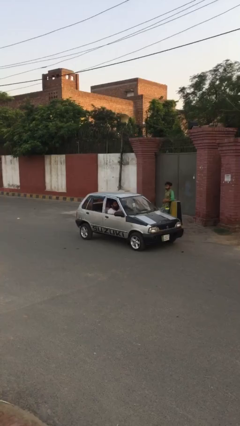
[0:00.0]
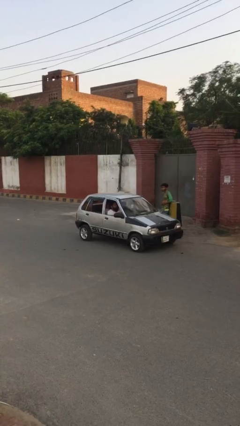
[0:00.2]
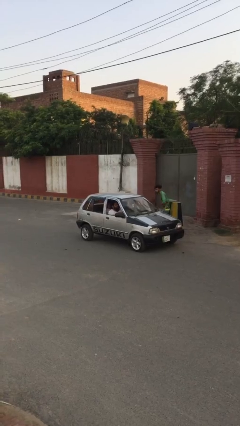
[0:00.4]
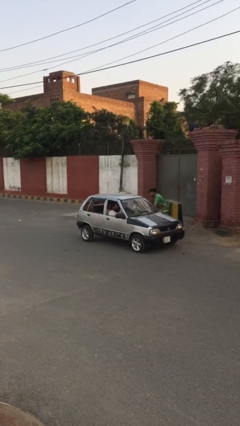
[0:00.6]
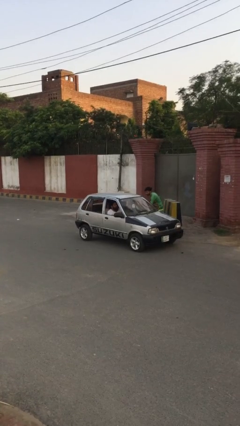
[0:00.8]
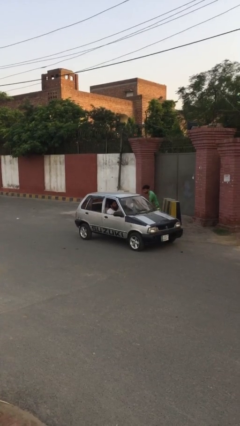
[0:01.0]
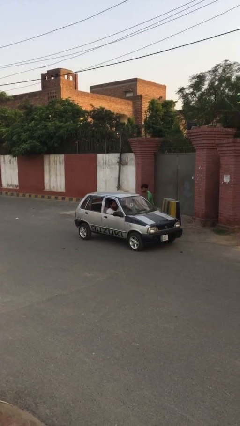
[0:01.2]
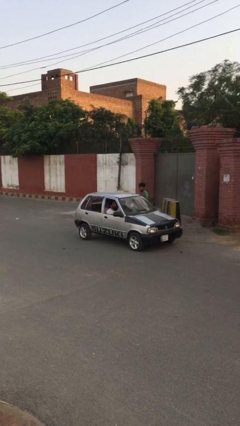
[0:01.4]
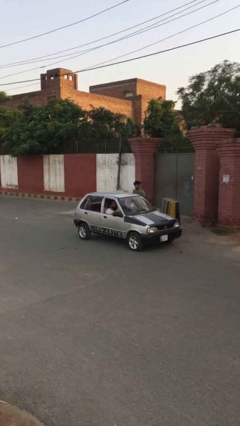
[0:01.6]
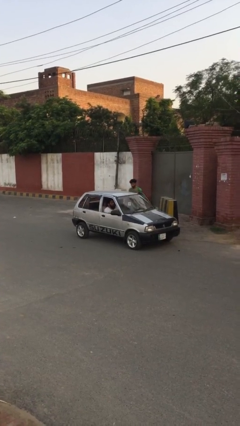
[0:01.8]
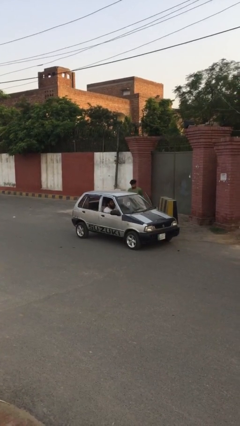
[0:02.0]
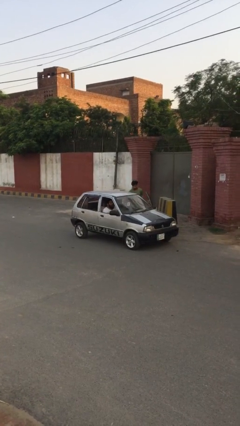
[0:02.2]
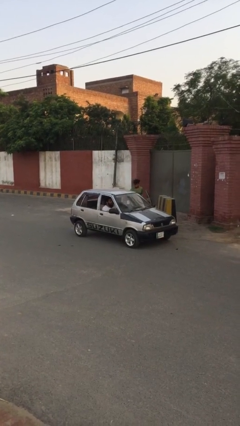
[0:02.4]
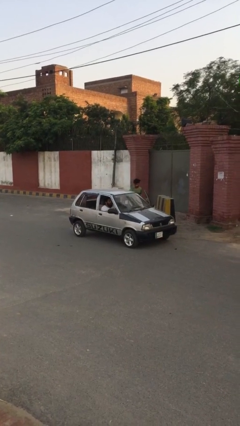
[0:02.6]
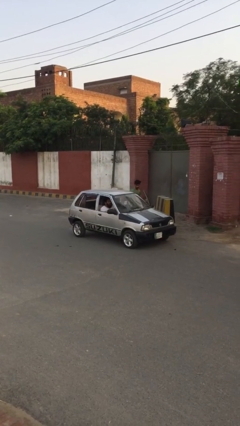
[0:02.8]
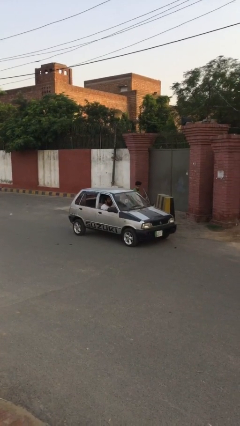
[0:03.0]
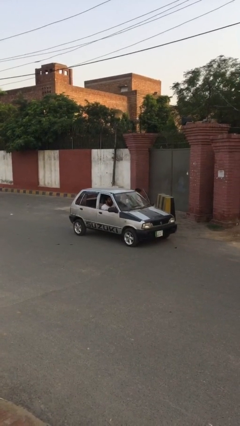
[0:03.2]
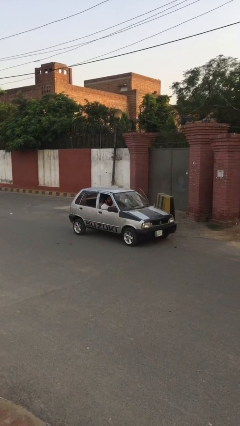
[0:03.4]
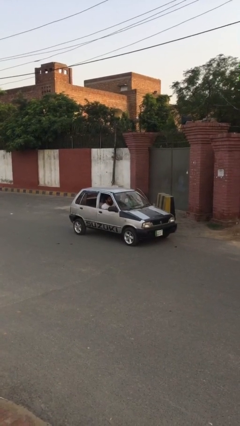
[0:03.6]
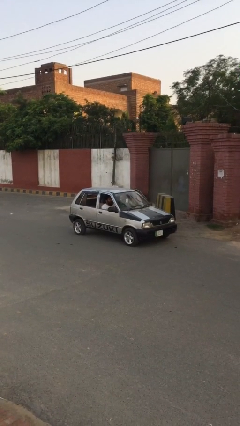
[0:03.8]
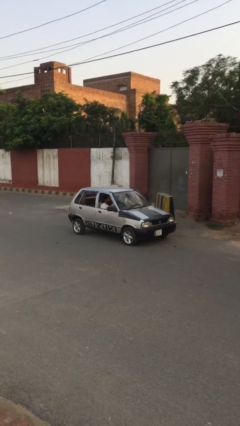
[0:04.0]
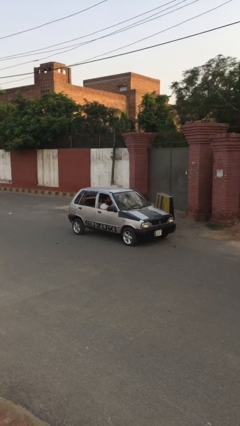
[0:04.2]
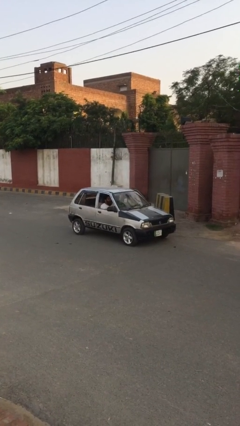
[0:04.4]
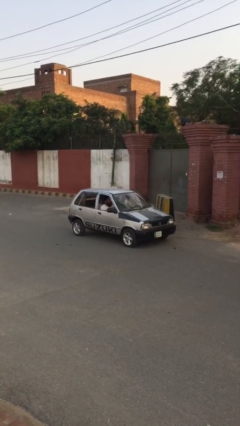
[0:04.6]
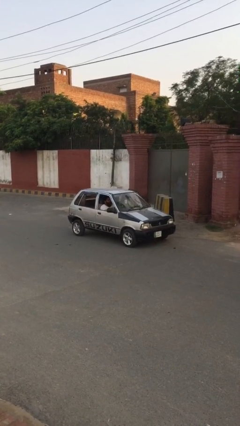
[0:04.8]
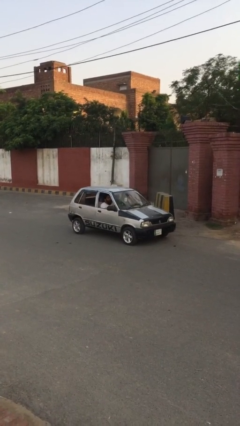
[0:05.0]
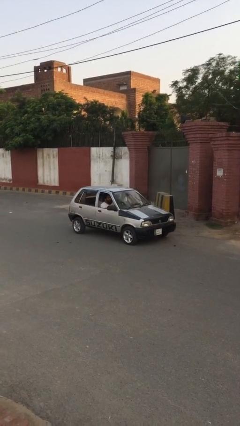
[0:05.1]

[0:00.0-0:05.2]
car picks up person

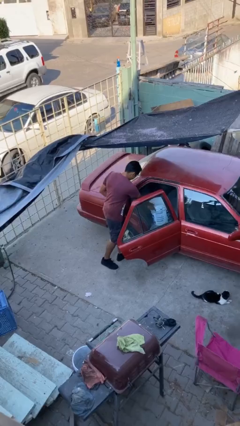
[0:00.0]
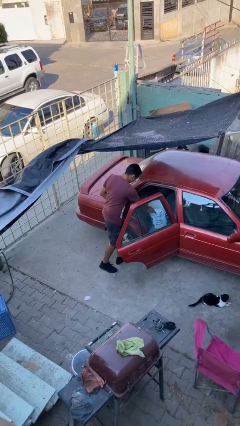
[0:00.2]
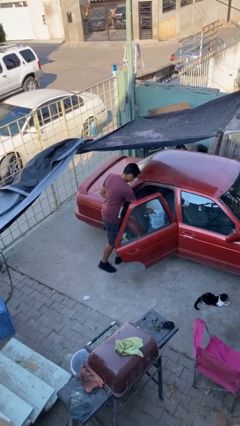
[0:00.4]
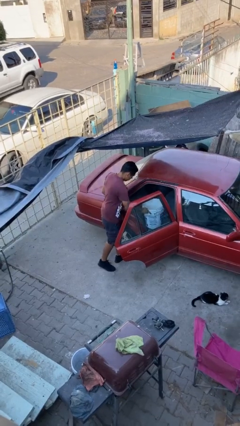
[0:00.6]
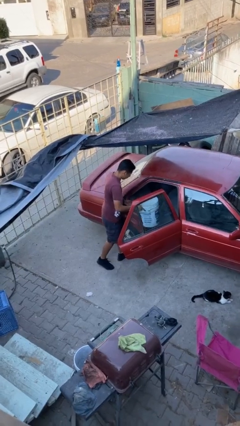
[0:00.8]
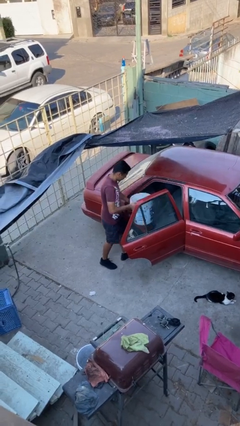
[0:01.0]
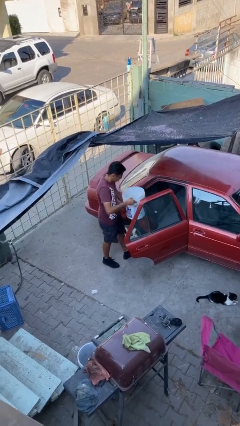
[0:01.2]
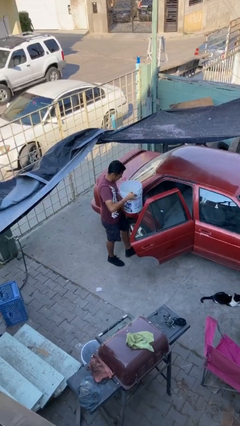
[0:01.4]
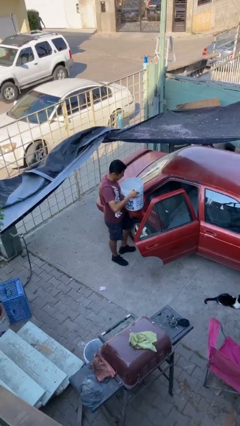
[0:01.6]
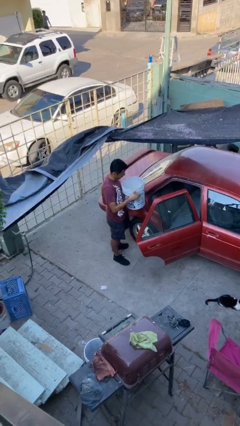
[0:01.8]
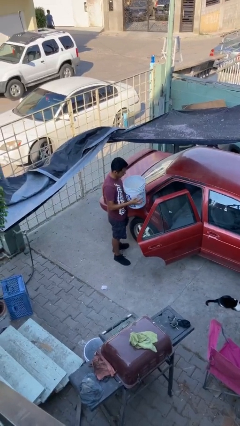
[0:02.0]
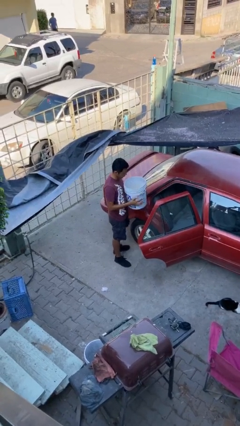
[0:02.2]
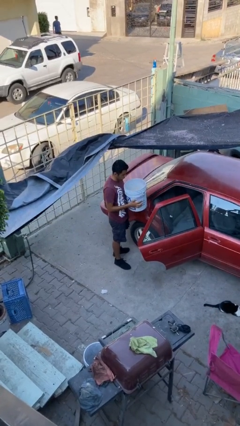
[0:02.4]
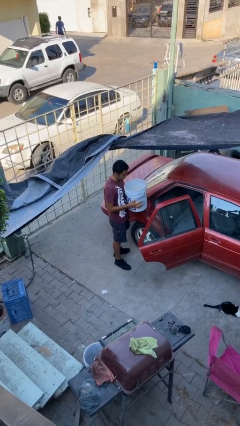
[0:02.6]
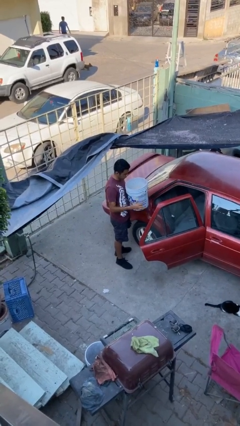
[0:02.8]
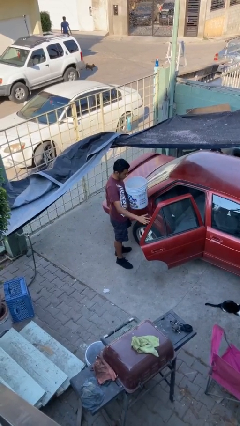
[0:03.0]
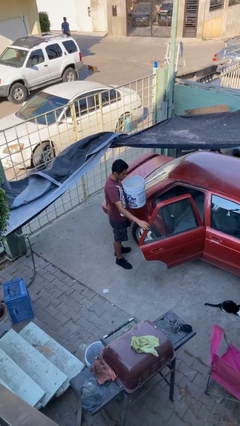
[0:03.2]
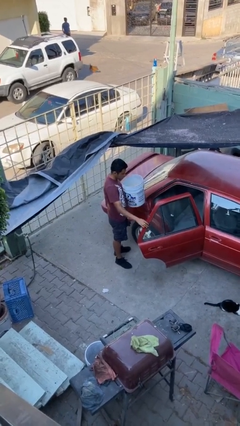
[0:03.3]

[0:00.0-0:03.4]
person unloads car

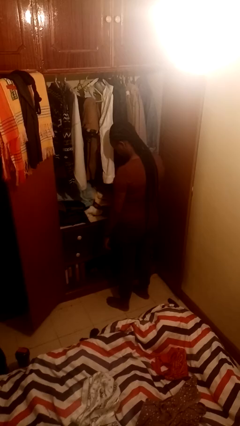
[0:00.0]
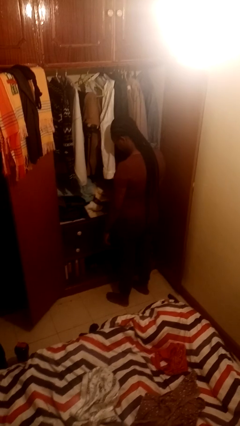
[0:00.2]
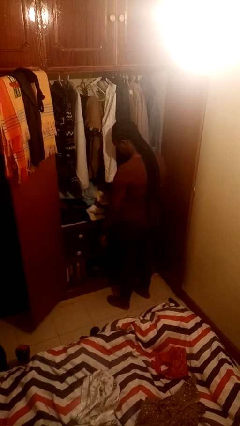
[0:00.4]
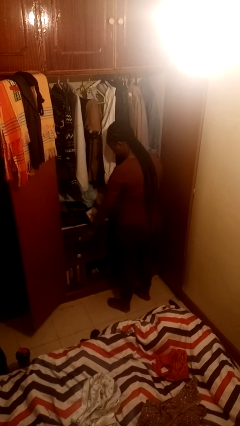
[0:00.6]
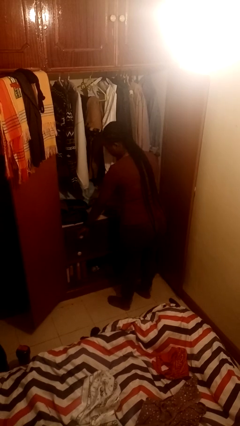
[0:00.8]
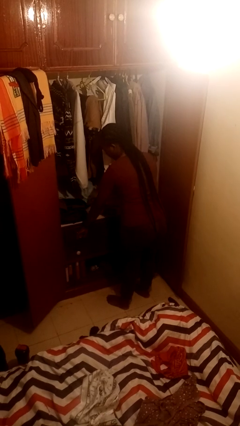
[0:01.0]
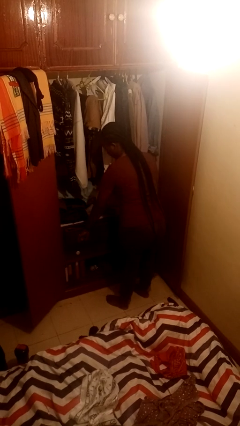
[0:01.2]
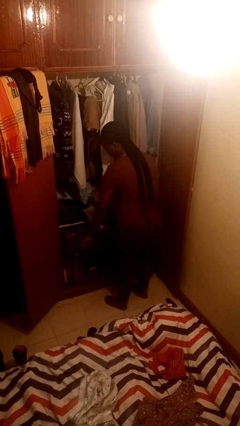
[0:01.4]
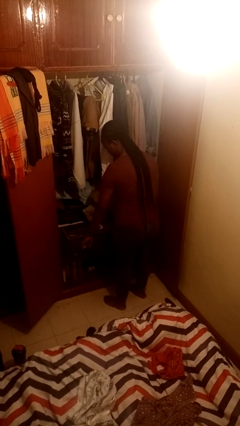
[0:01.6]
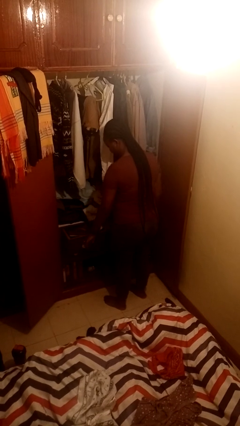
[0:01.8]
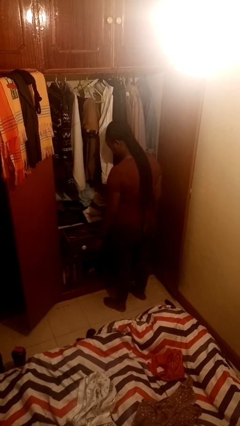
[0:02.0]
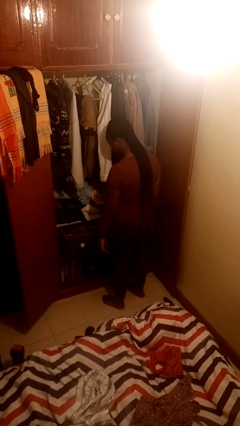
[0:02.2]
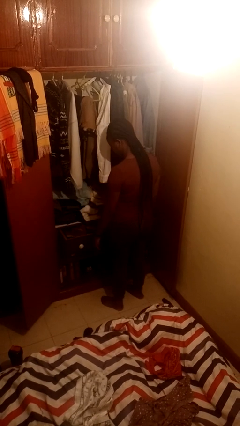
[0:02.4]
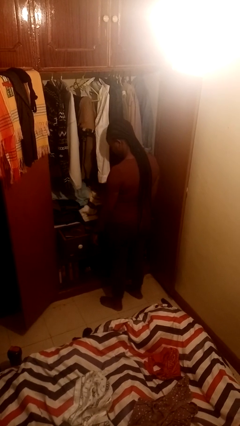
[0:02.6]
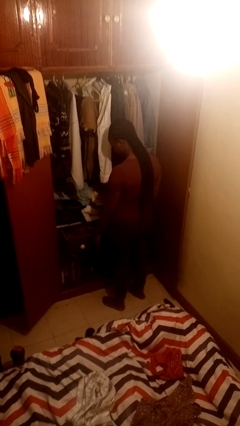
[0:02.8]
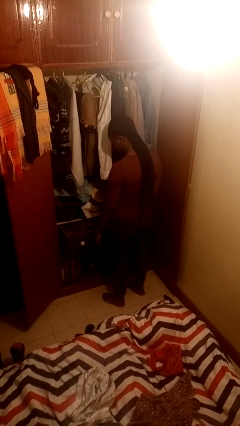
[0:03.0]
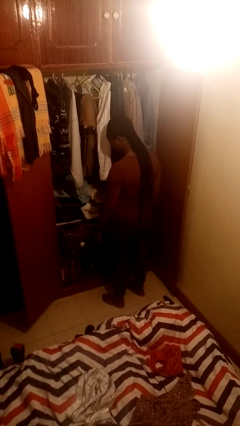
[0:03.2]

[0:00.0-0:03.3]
person opens dresser drawer

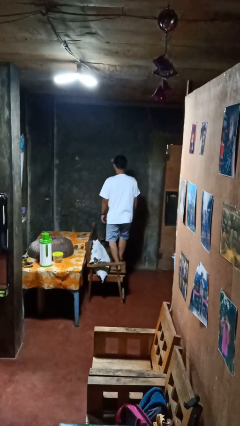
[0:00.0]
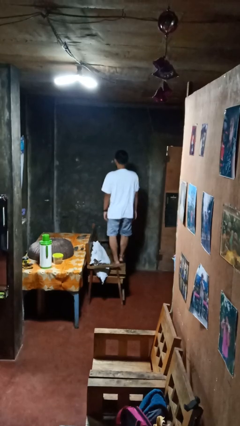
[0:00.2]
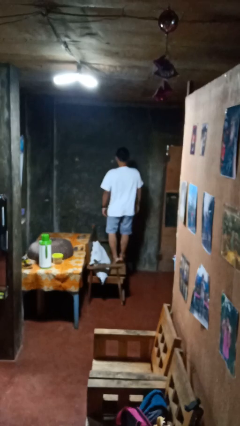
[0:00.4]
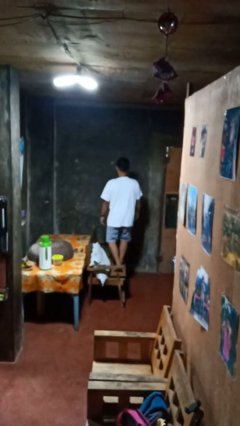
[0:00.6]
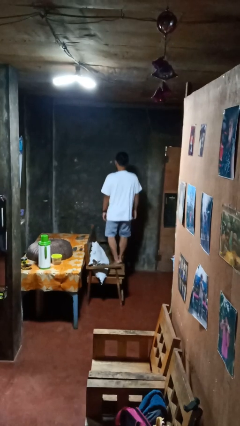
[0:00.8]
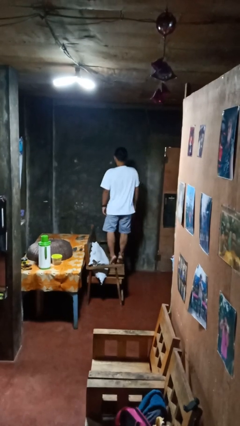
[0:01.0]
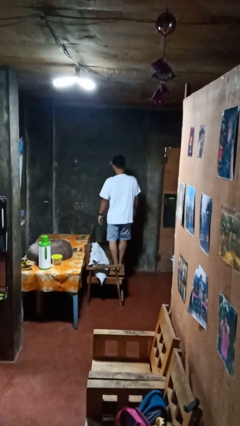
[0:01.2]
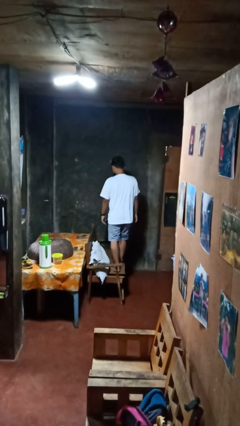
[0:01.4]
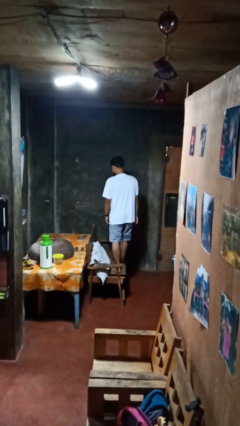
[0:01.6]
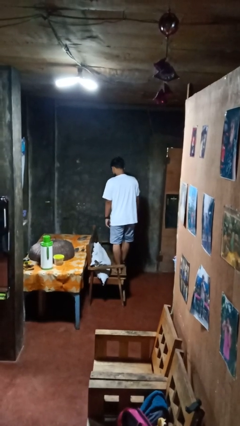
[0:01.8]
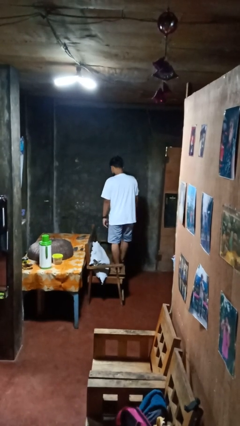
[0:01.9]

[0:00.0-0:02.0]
person jumps on couch

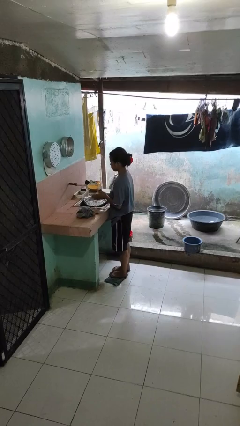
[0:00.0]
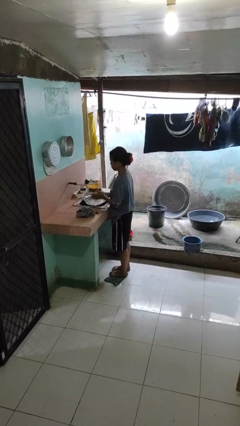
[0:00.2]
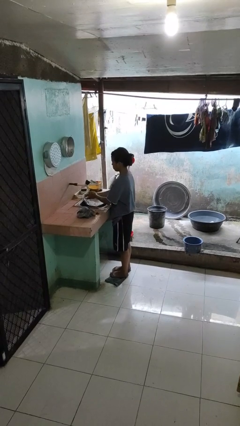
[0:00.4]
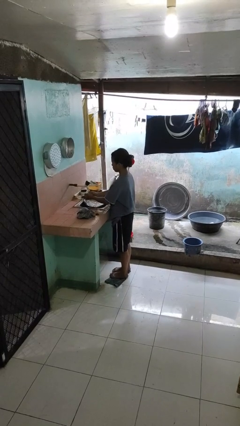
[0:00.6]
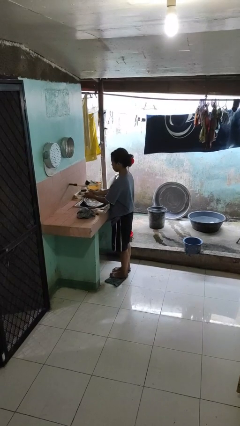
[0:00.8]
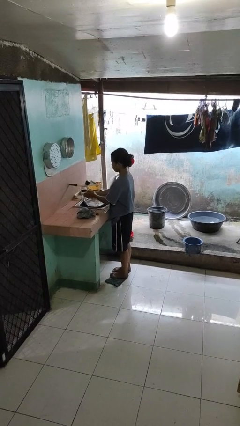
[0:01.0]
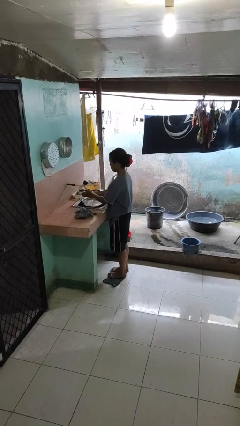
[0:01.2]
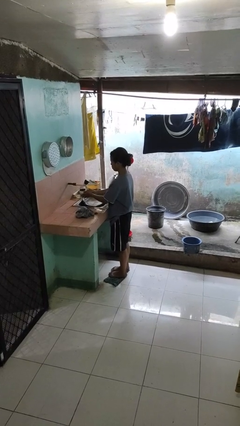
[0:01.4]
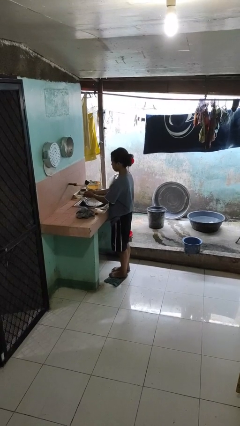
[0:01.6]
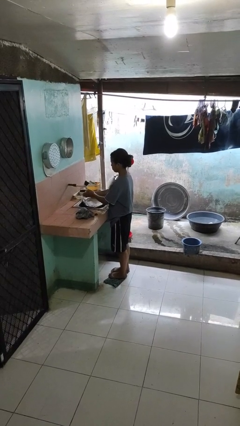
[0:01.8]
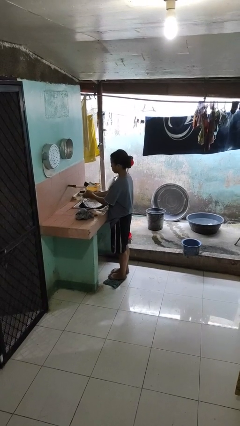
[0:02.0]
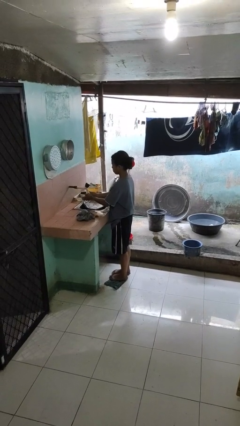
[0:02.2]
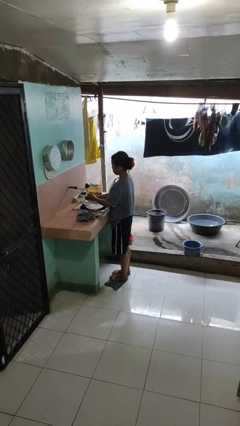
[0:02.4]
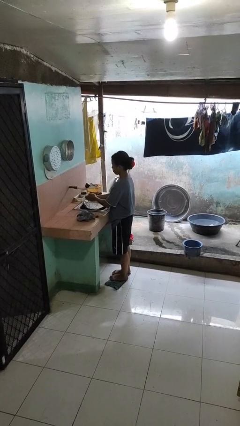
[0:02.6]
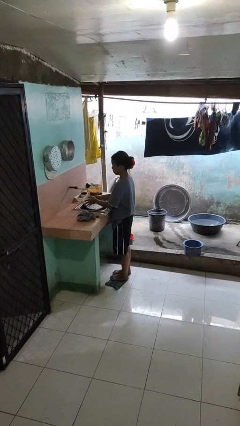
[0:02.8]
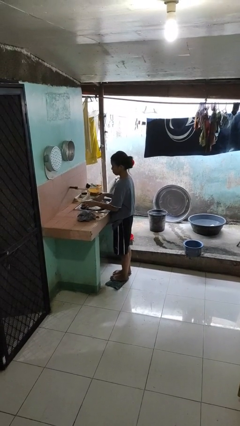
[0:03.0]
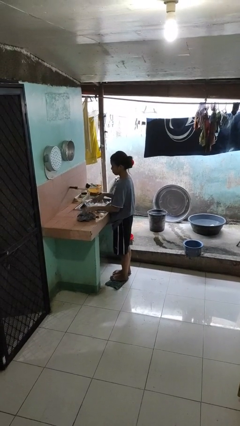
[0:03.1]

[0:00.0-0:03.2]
person washes hands

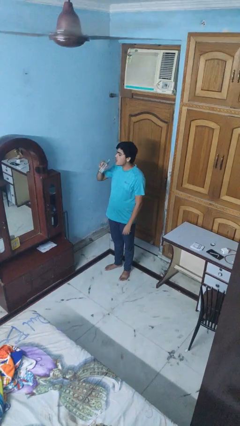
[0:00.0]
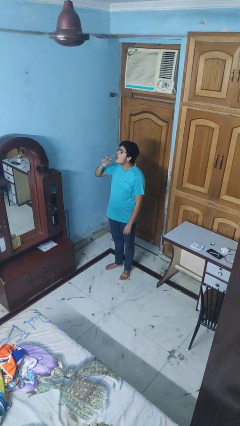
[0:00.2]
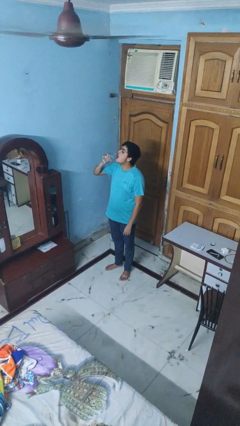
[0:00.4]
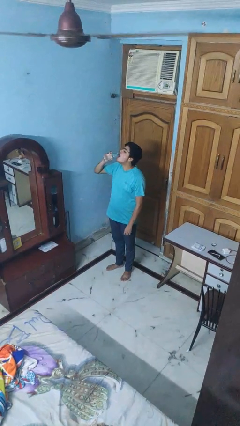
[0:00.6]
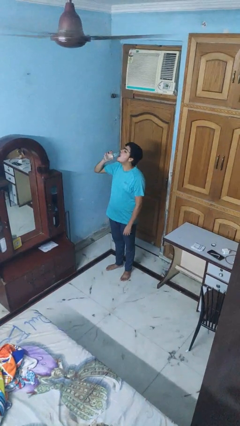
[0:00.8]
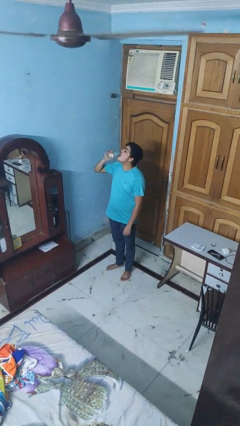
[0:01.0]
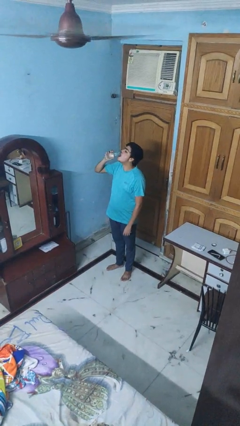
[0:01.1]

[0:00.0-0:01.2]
person drinks from bottle
